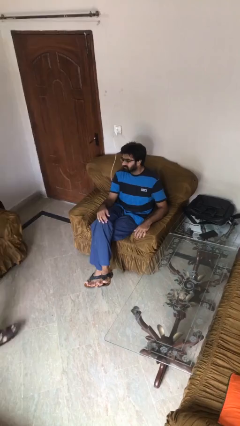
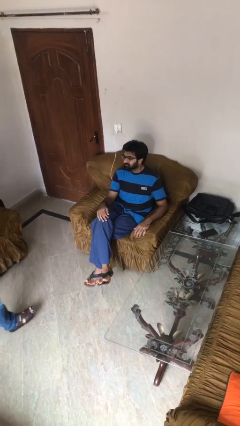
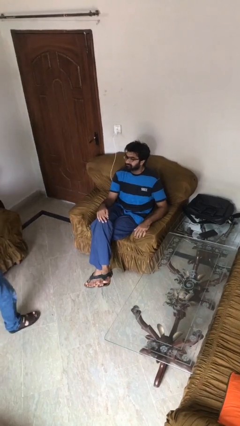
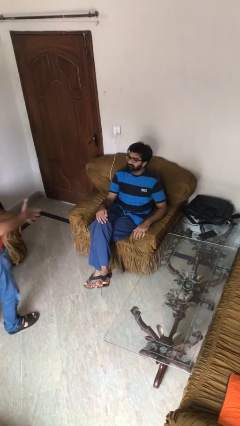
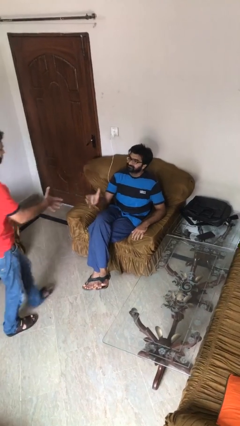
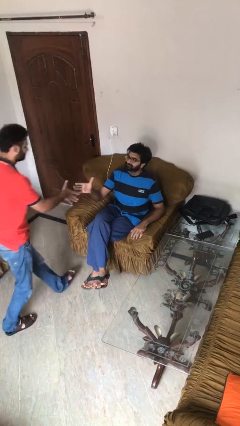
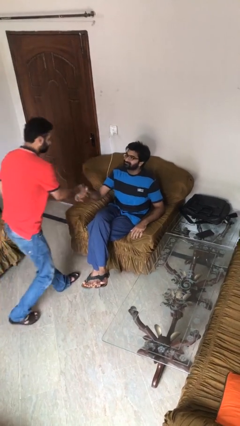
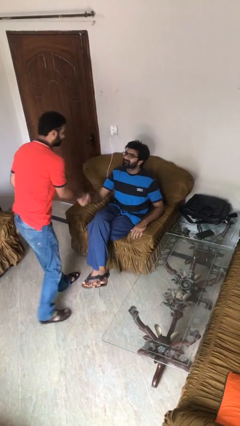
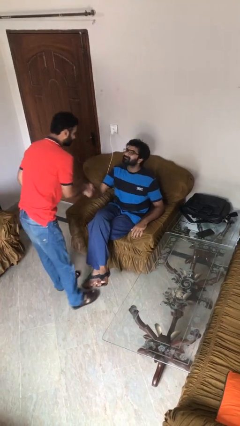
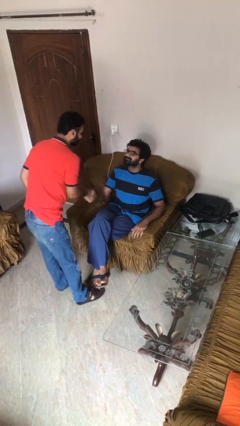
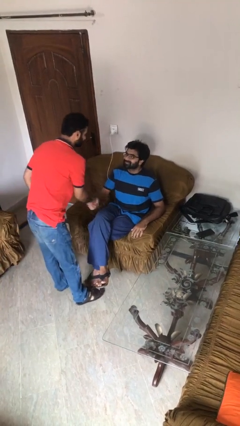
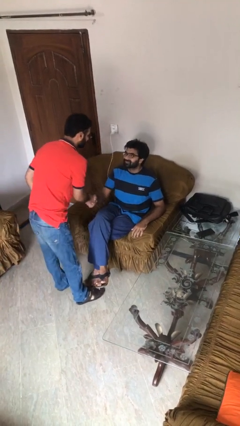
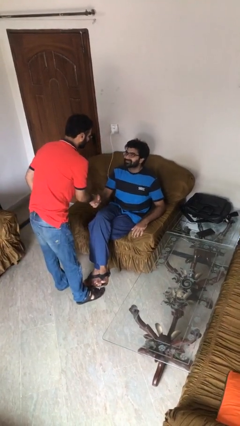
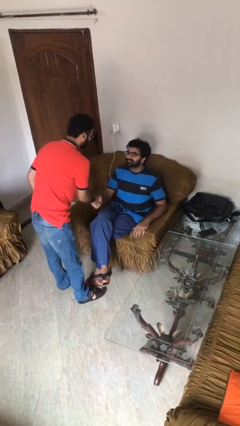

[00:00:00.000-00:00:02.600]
person shakes hand

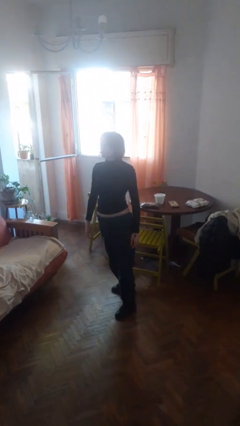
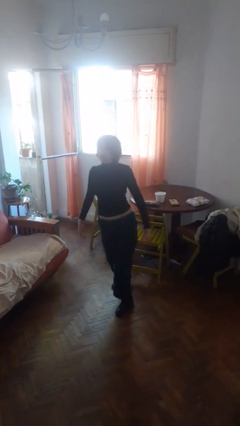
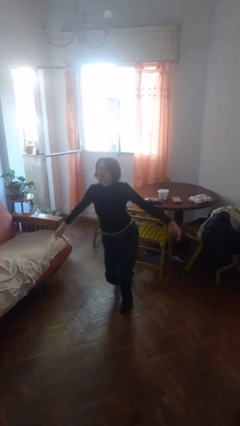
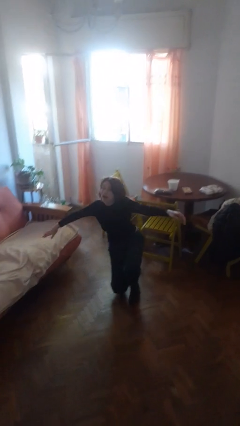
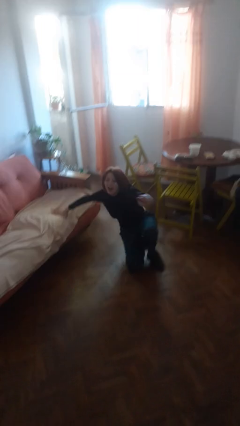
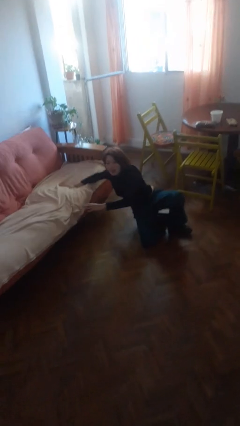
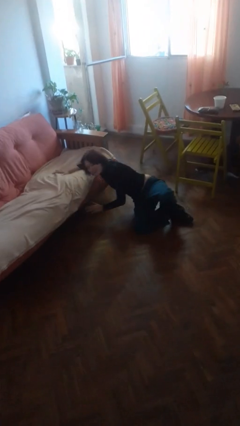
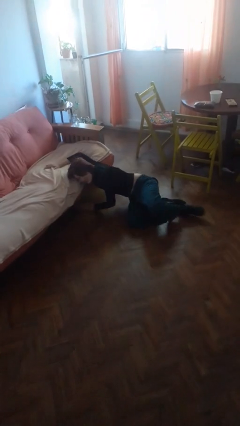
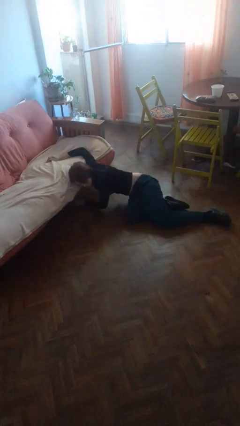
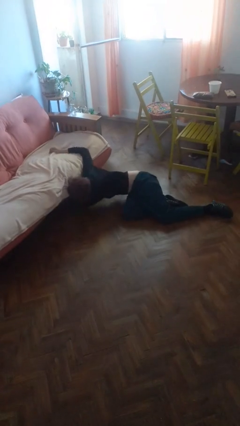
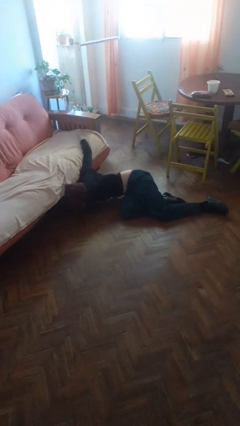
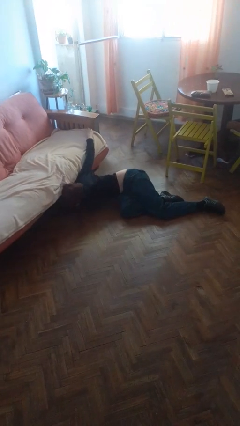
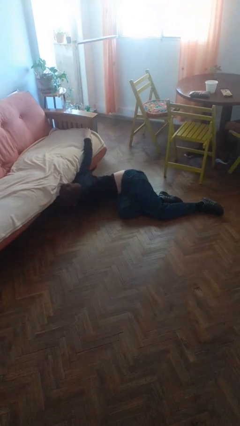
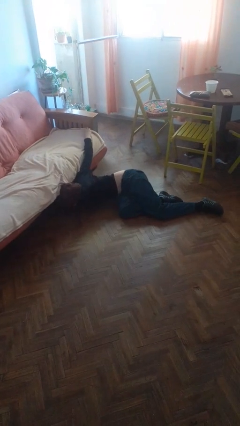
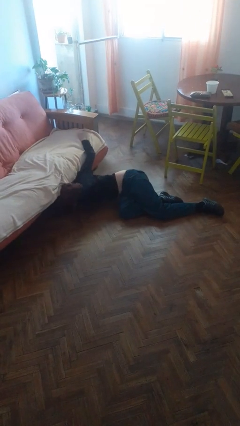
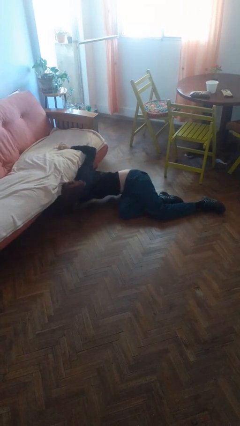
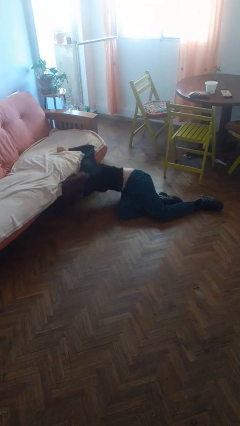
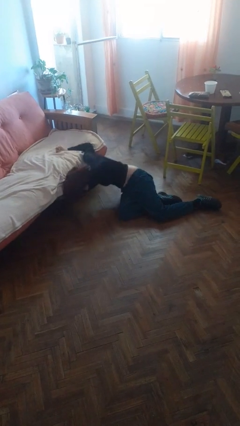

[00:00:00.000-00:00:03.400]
person falls while standing

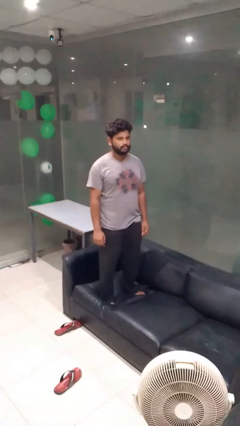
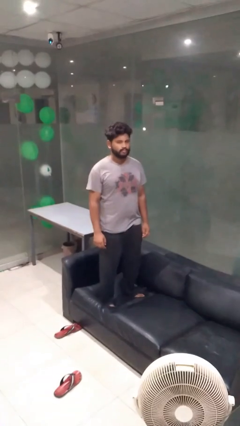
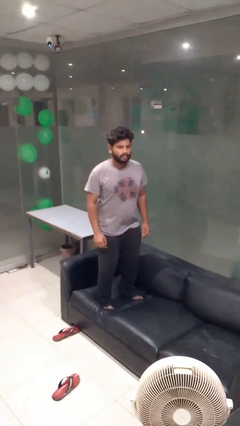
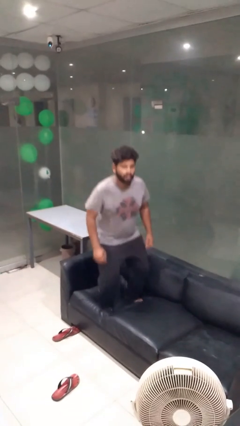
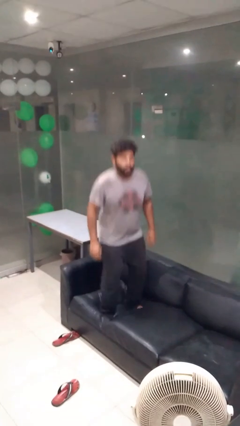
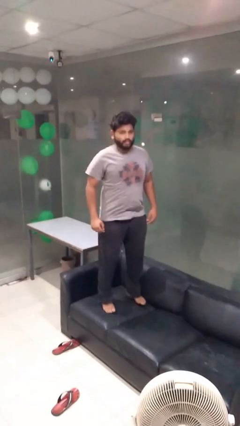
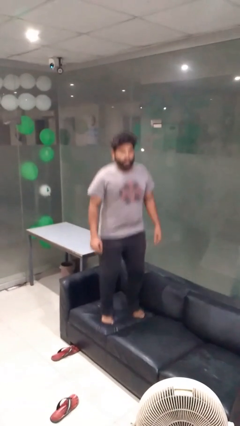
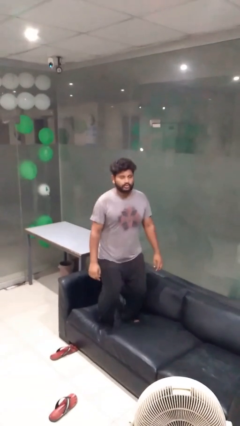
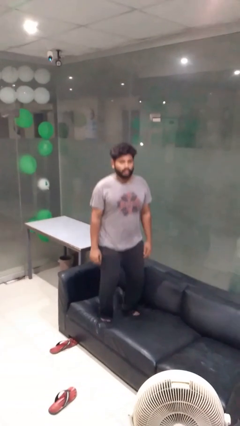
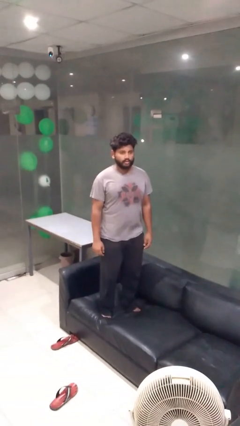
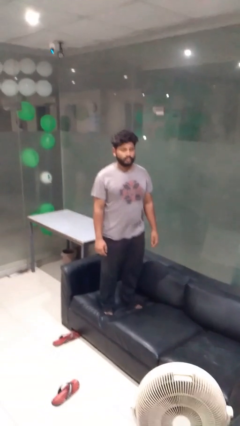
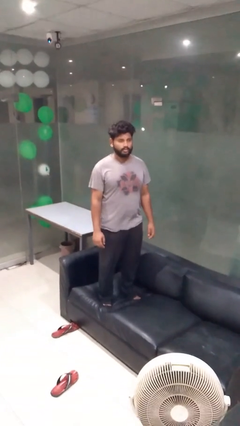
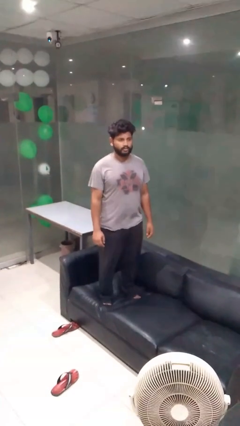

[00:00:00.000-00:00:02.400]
person jumps on couch

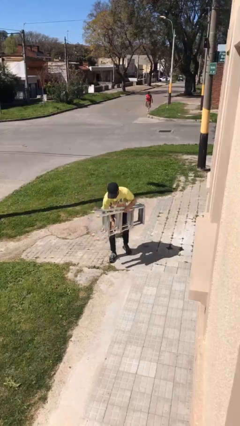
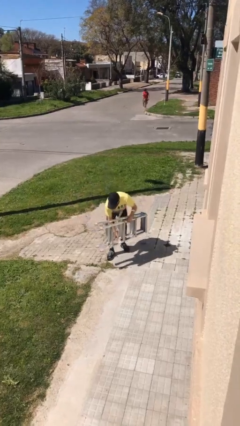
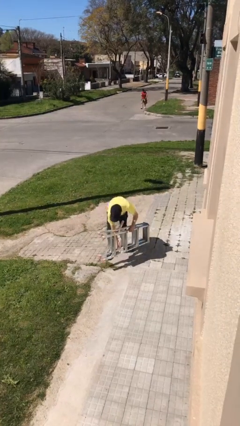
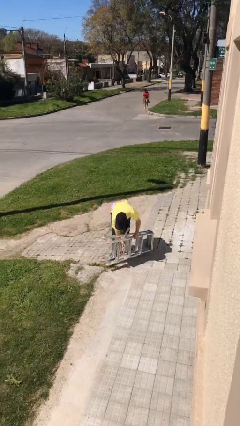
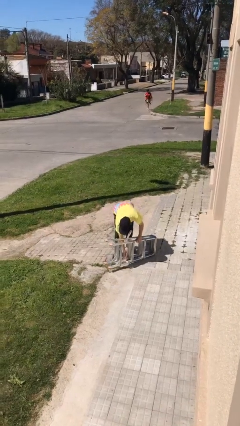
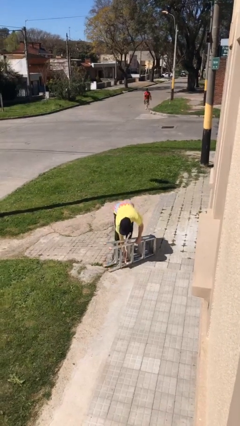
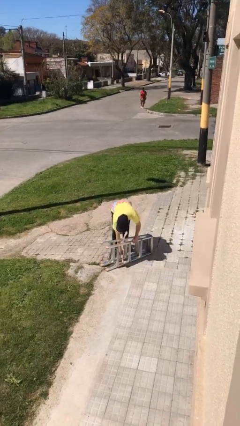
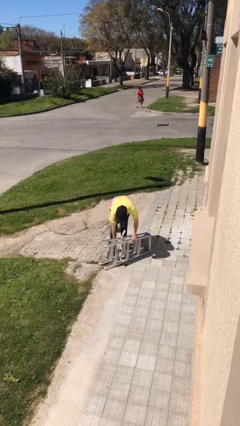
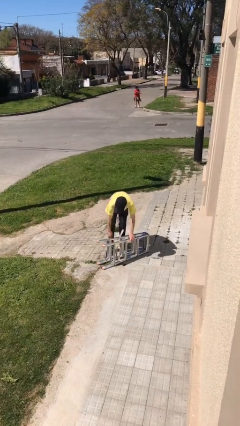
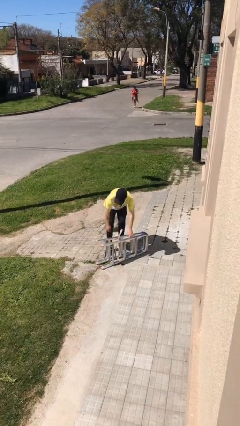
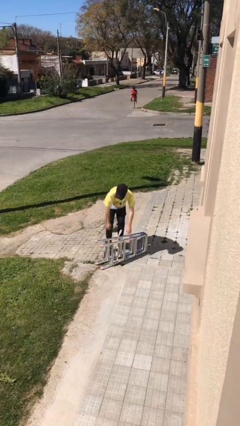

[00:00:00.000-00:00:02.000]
person puts down object on floor

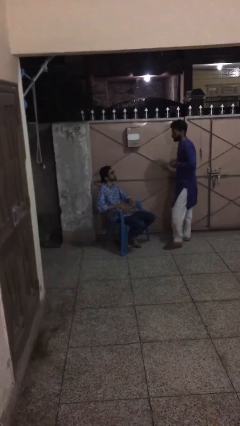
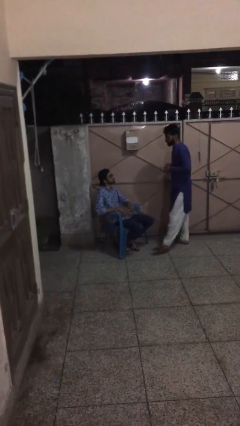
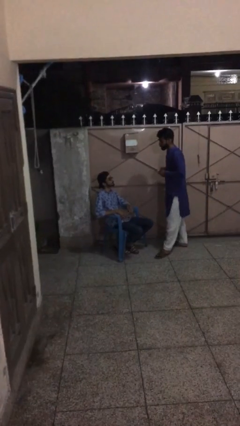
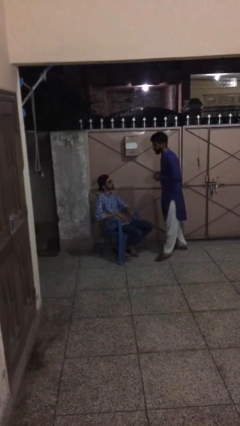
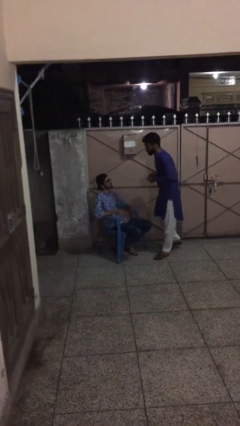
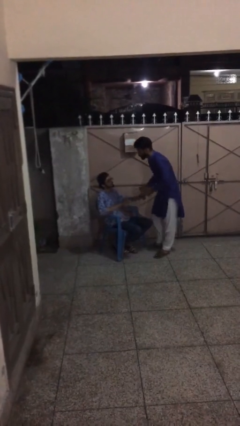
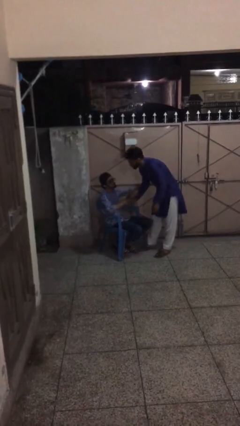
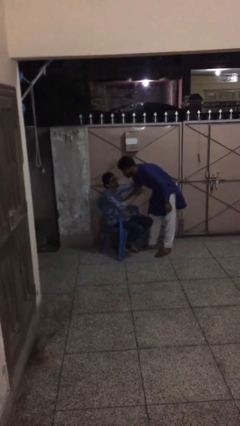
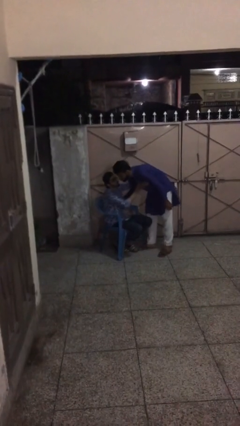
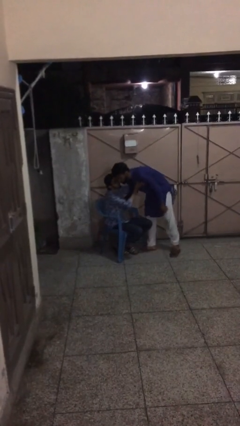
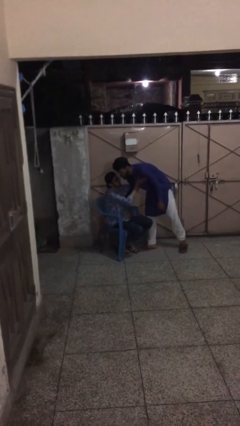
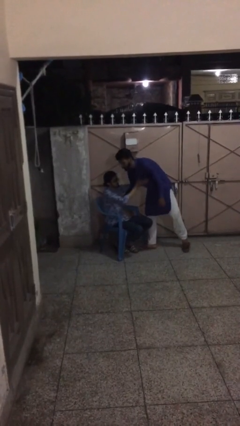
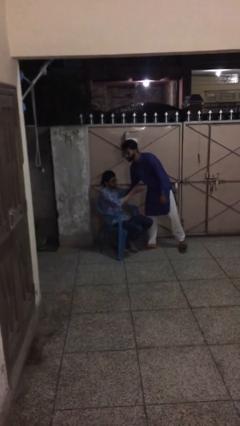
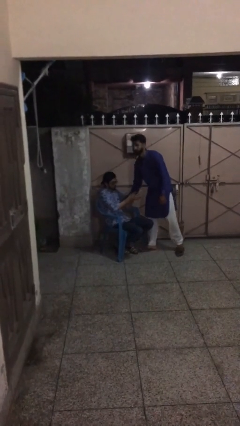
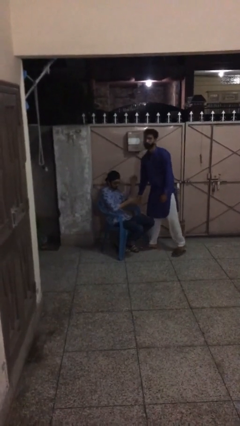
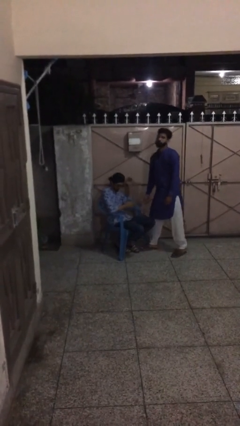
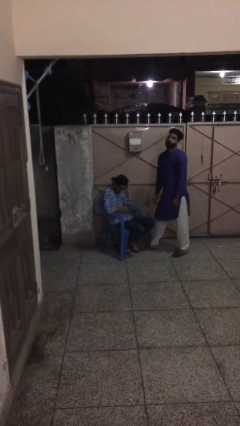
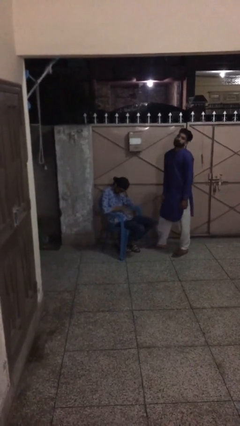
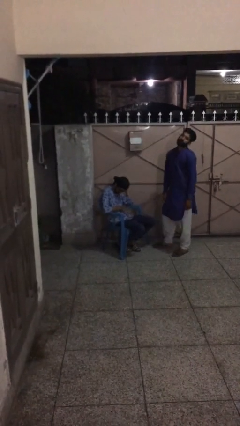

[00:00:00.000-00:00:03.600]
person embraces person

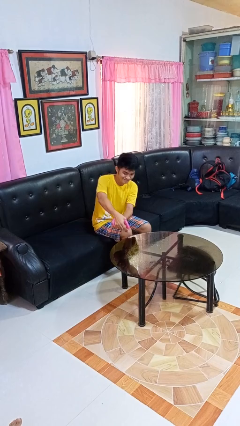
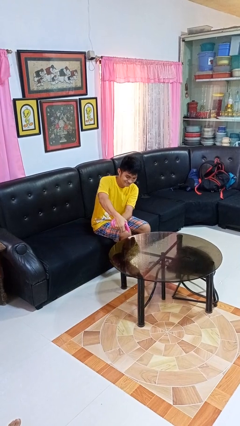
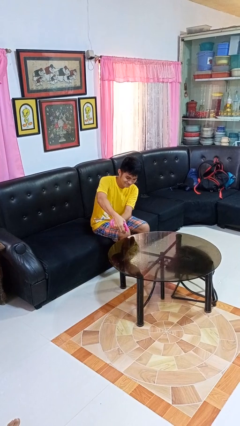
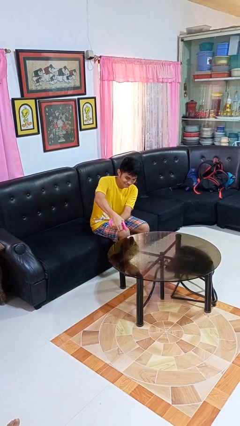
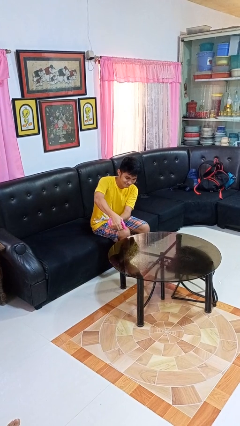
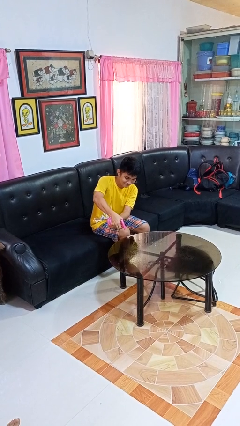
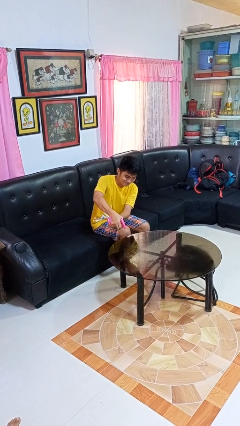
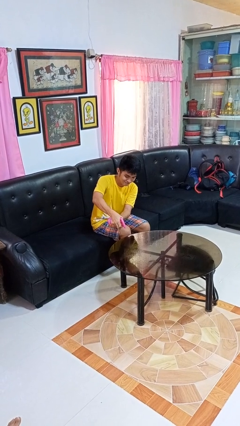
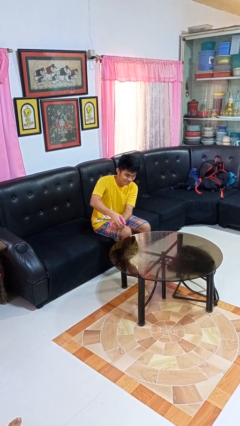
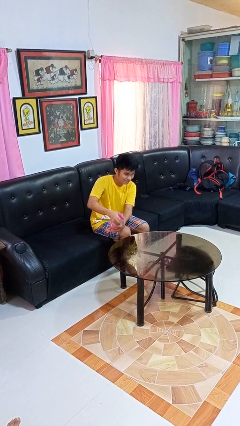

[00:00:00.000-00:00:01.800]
person sprays from bottle

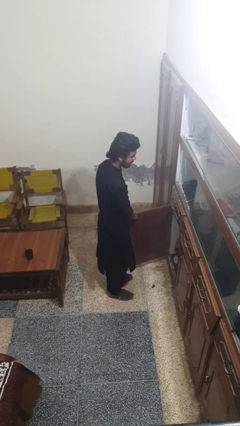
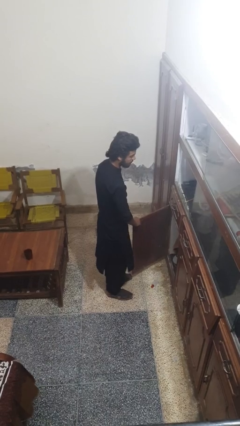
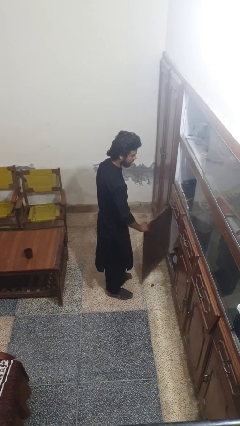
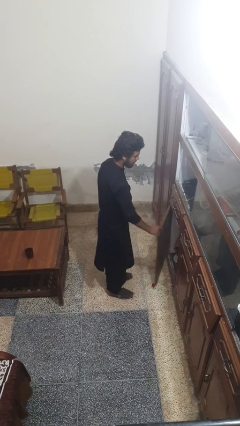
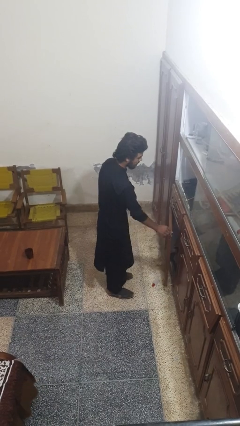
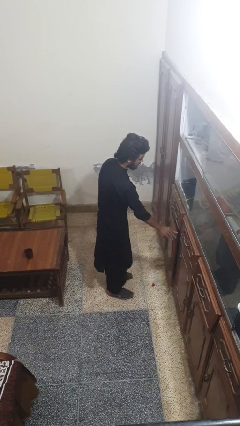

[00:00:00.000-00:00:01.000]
person closes cabinet

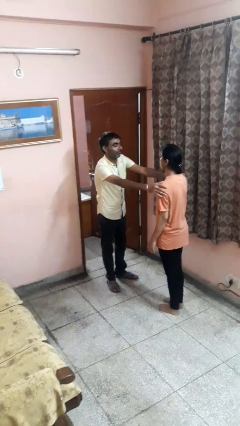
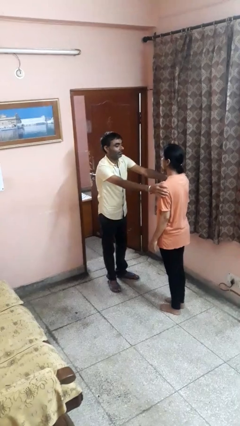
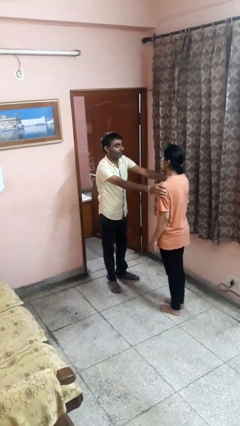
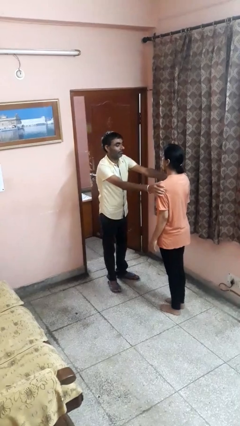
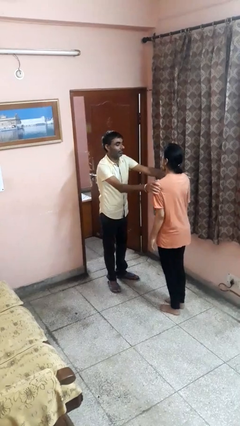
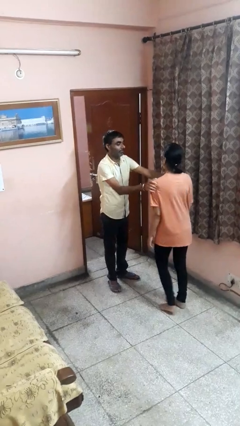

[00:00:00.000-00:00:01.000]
person grabs person by shoulder
